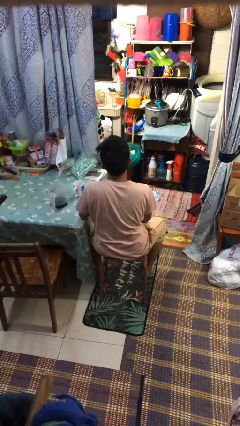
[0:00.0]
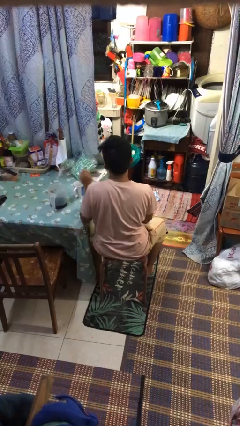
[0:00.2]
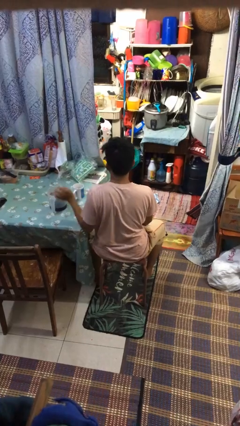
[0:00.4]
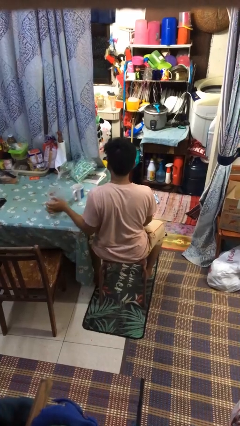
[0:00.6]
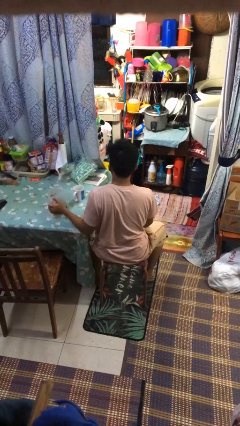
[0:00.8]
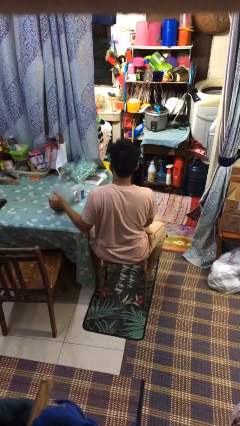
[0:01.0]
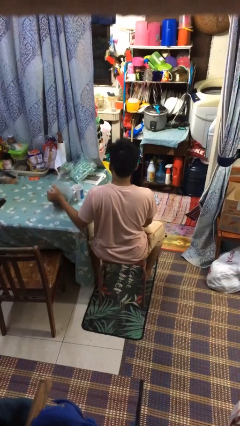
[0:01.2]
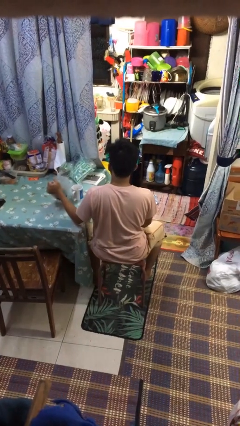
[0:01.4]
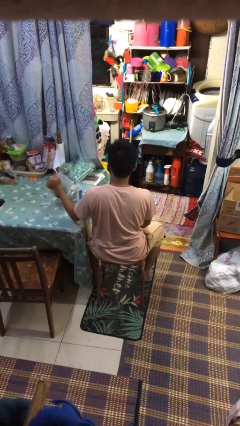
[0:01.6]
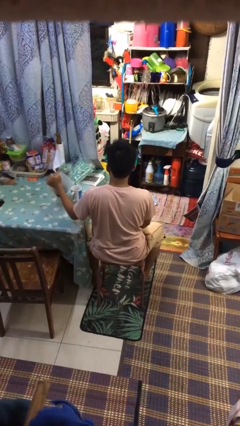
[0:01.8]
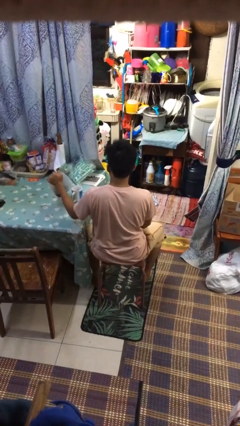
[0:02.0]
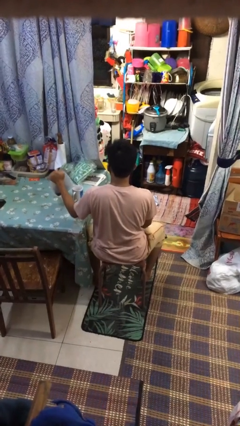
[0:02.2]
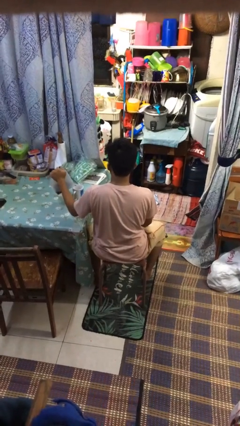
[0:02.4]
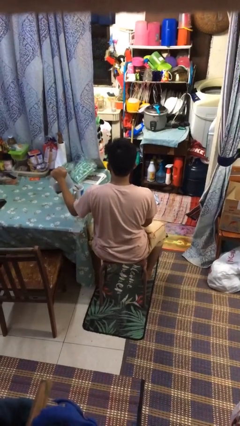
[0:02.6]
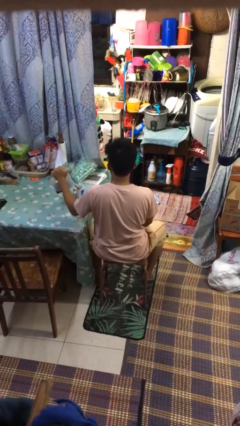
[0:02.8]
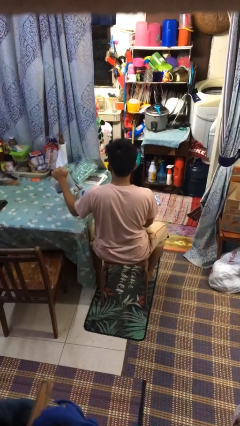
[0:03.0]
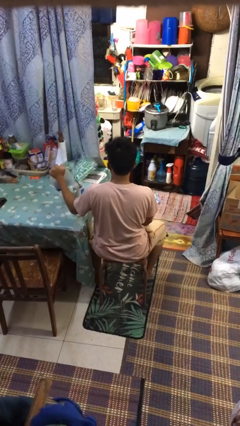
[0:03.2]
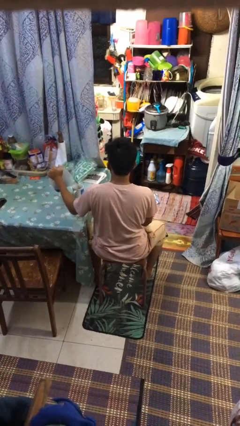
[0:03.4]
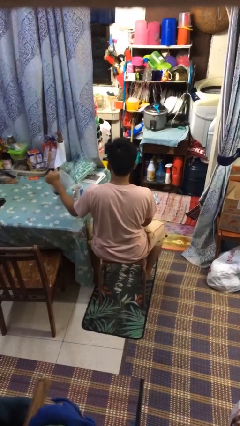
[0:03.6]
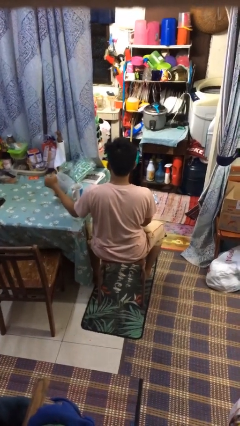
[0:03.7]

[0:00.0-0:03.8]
person pours coffee into mug

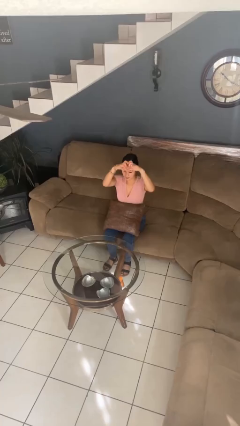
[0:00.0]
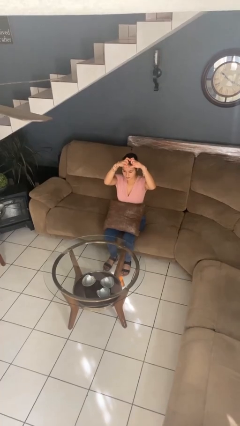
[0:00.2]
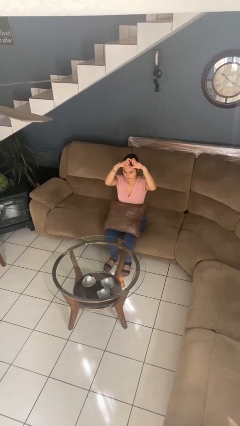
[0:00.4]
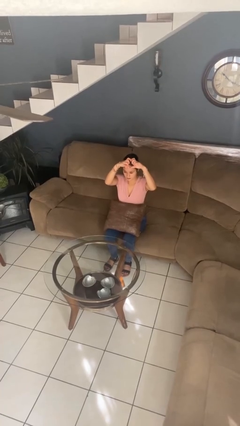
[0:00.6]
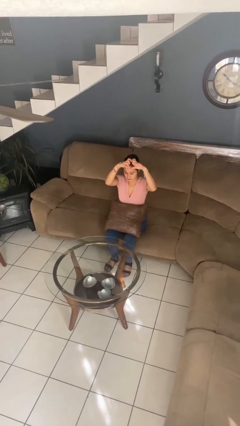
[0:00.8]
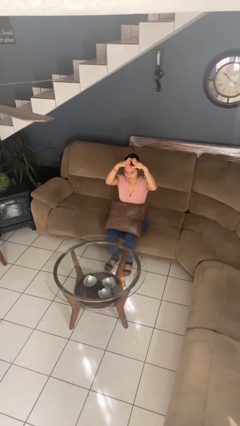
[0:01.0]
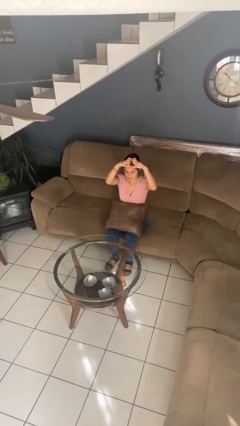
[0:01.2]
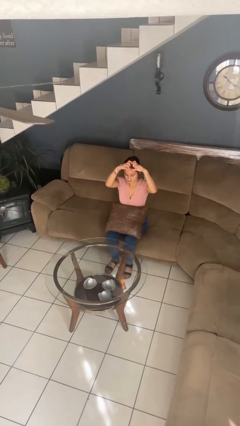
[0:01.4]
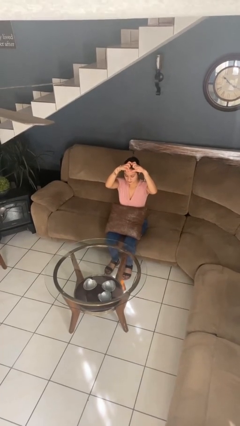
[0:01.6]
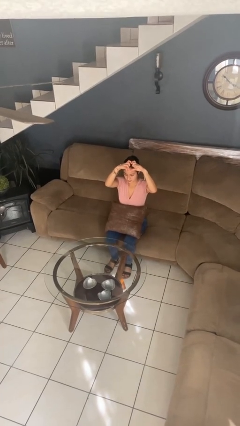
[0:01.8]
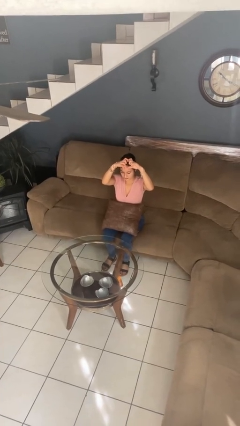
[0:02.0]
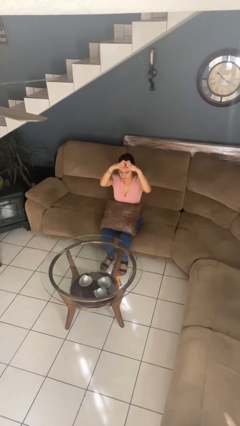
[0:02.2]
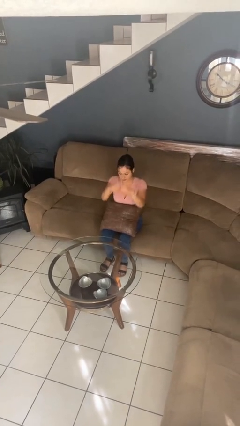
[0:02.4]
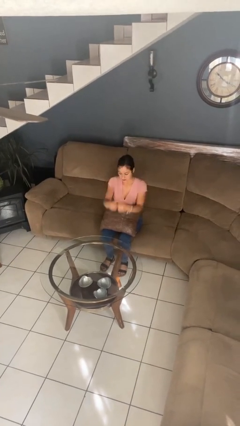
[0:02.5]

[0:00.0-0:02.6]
person gestures heart

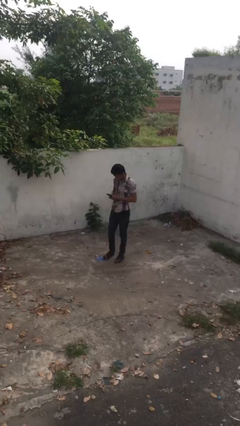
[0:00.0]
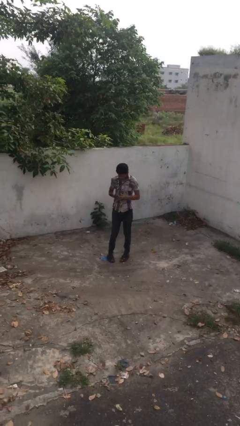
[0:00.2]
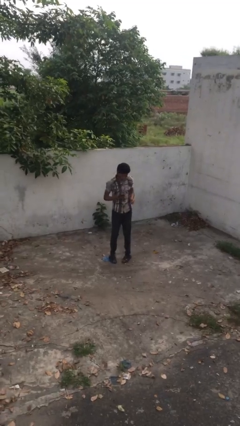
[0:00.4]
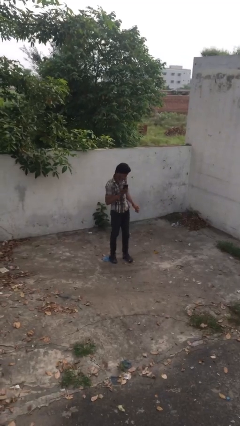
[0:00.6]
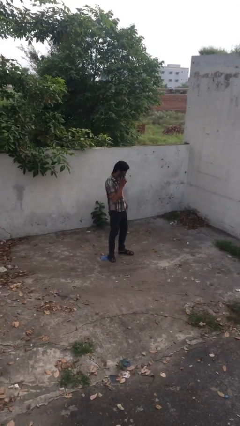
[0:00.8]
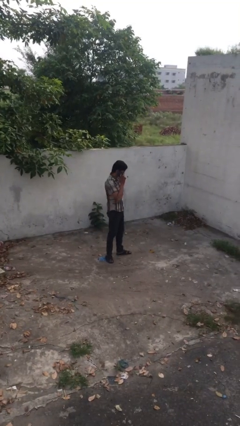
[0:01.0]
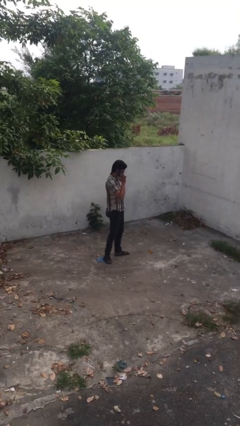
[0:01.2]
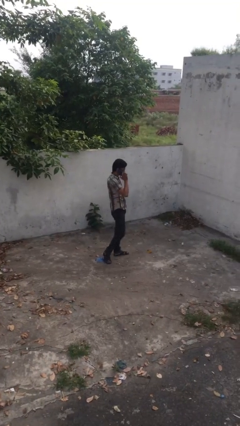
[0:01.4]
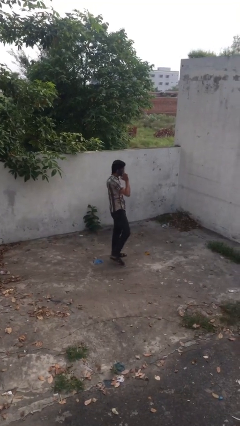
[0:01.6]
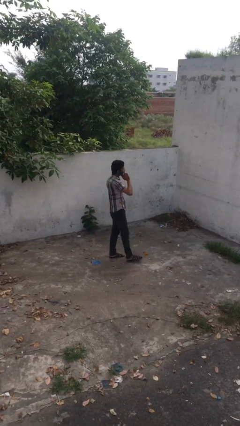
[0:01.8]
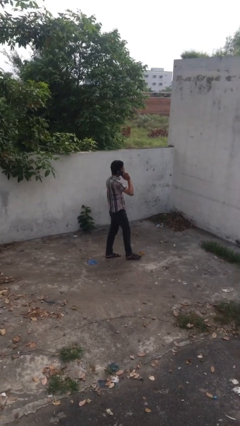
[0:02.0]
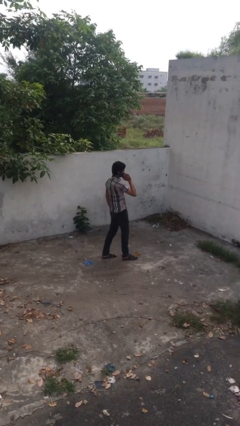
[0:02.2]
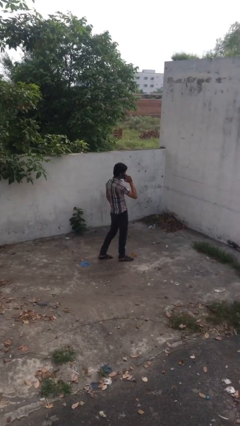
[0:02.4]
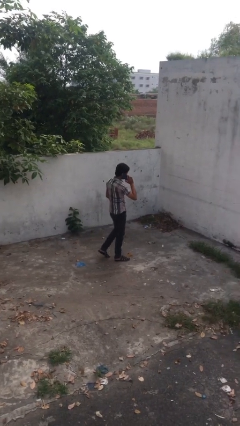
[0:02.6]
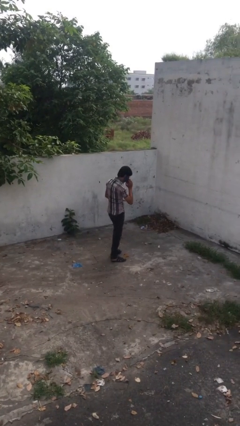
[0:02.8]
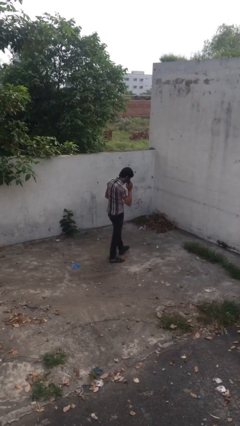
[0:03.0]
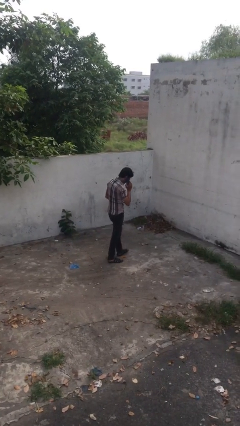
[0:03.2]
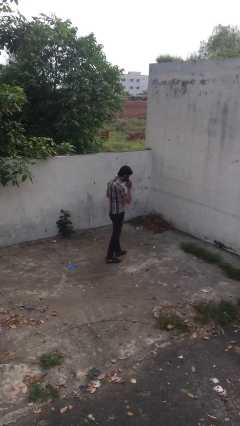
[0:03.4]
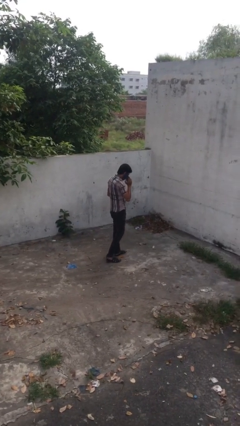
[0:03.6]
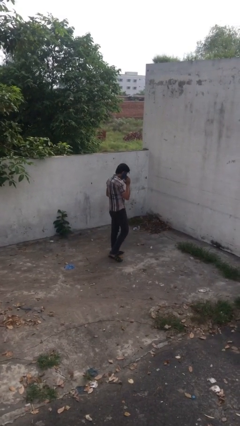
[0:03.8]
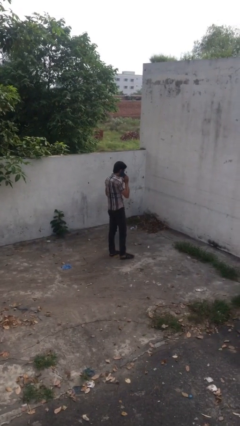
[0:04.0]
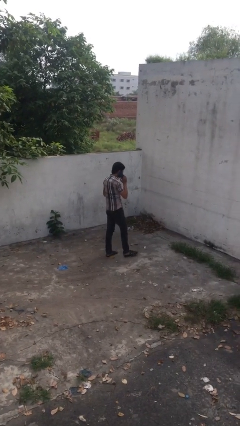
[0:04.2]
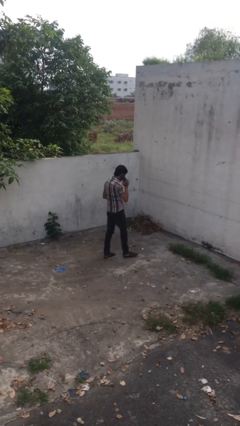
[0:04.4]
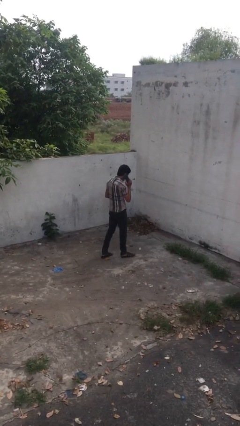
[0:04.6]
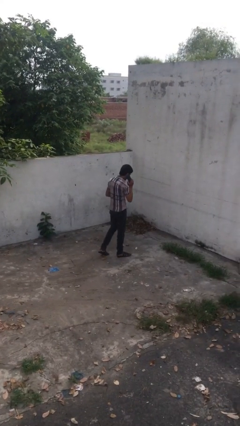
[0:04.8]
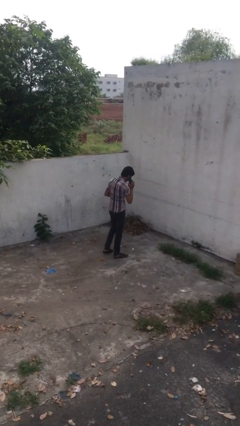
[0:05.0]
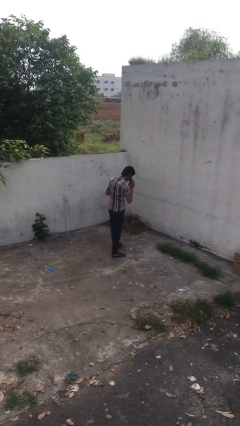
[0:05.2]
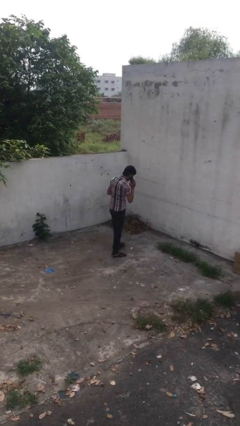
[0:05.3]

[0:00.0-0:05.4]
person talks on phone

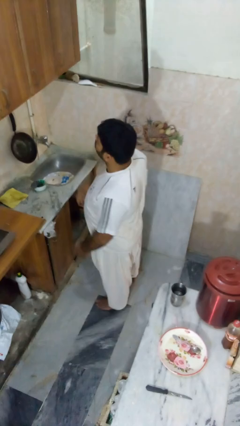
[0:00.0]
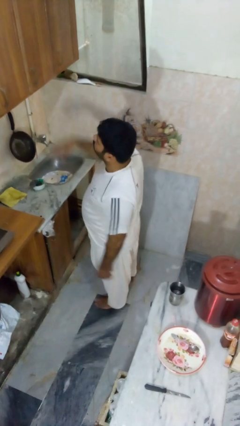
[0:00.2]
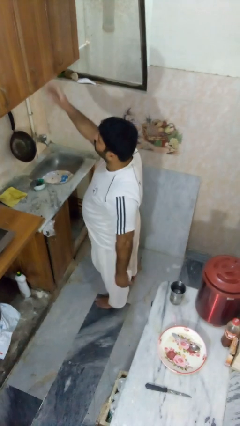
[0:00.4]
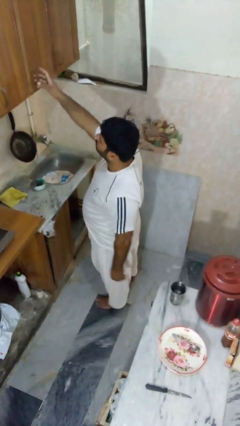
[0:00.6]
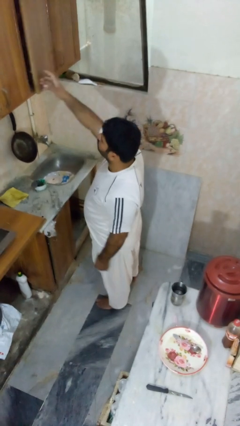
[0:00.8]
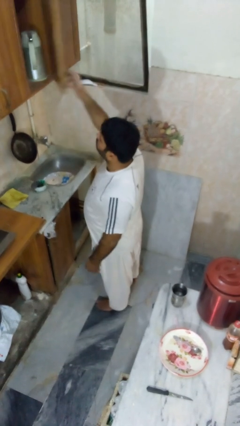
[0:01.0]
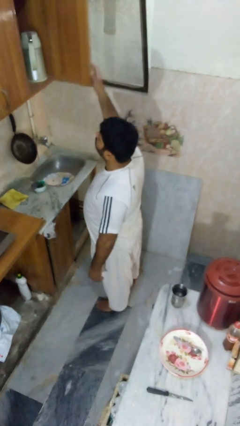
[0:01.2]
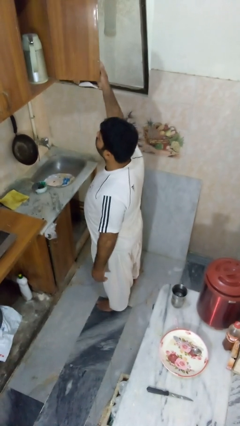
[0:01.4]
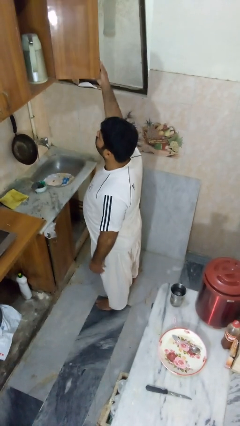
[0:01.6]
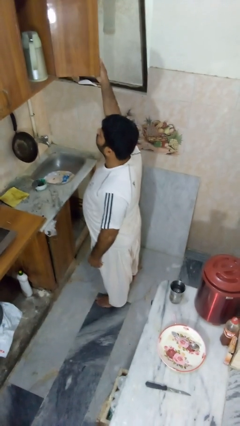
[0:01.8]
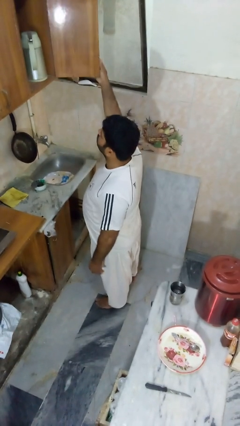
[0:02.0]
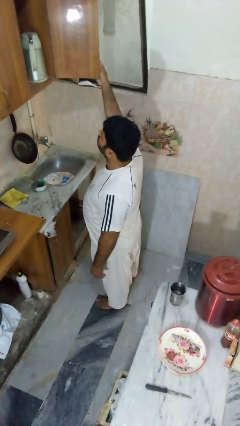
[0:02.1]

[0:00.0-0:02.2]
person opens cabinet

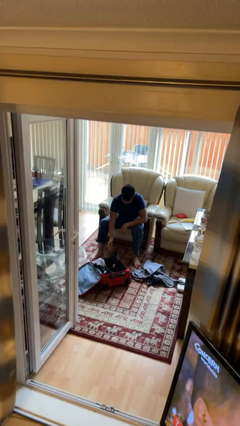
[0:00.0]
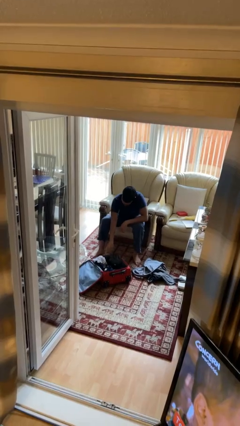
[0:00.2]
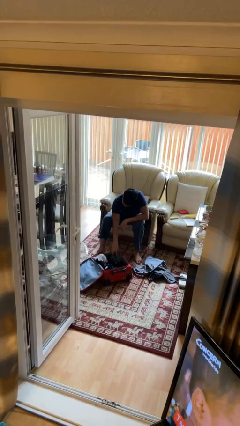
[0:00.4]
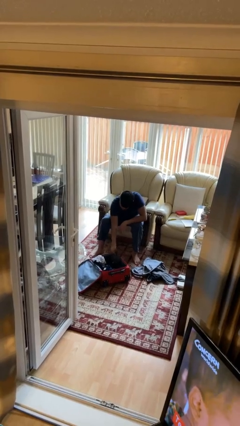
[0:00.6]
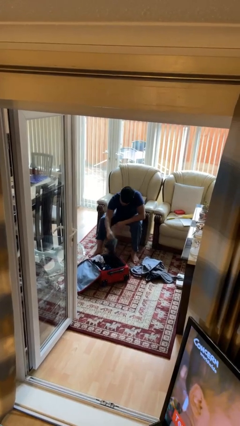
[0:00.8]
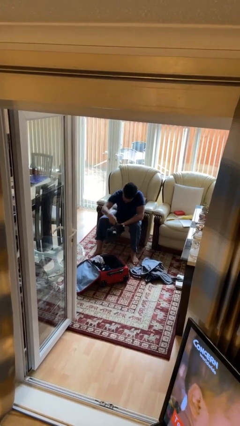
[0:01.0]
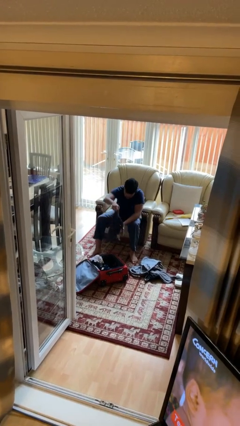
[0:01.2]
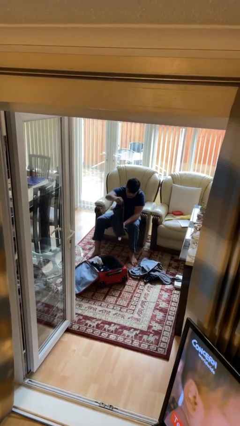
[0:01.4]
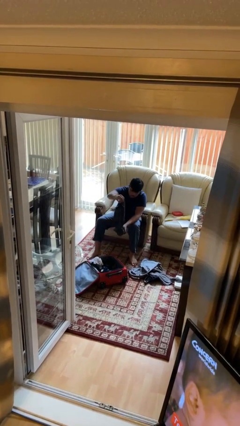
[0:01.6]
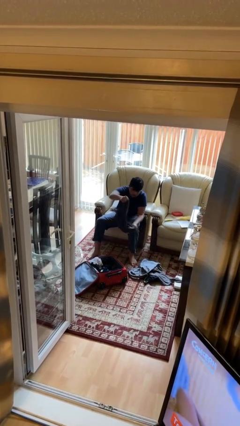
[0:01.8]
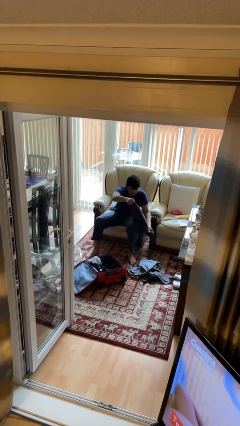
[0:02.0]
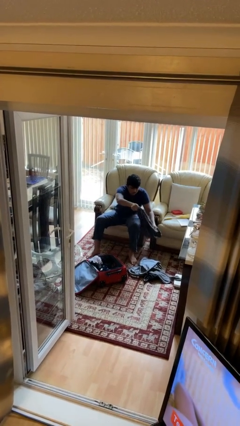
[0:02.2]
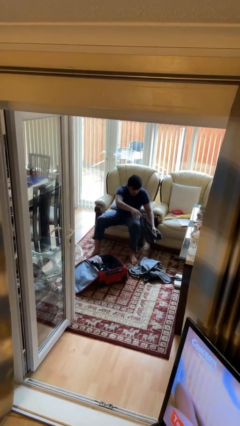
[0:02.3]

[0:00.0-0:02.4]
person unloads clothes from suitcase

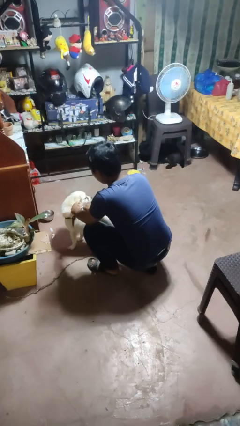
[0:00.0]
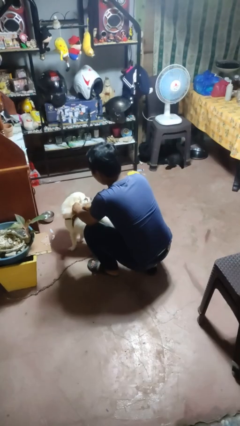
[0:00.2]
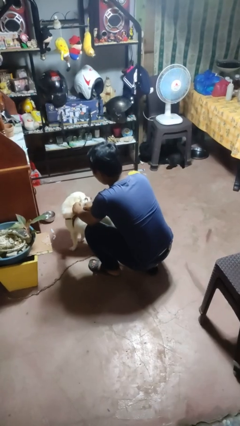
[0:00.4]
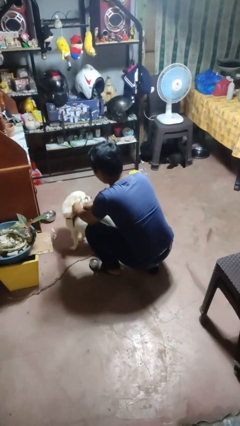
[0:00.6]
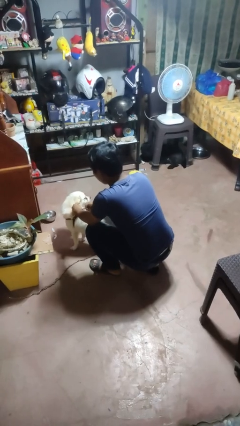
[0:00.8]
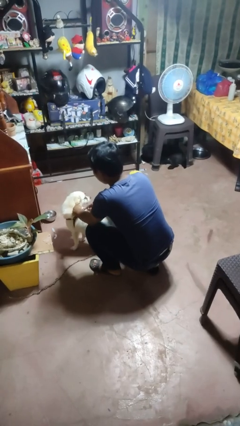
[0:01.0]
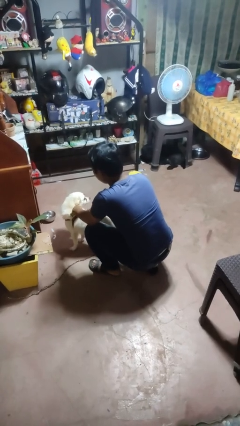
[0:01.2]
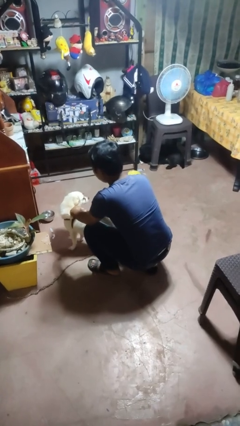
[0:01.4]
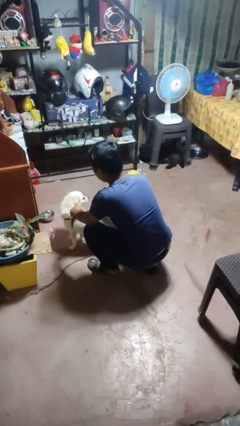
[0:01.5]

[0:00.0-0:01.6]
person attaches leash to dog
